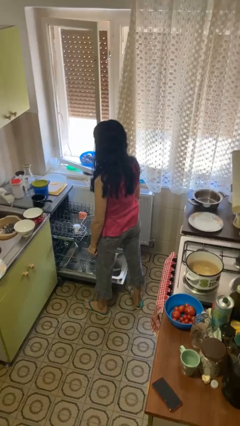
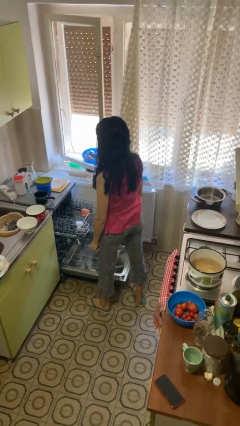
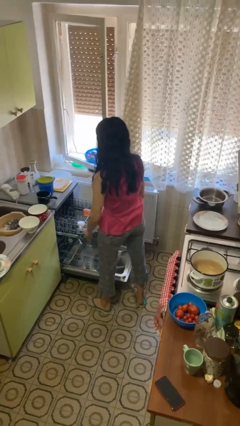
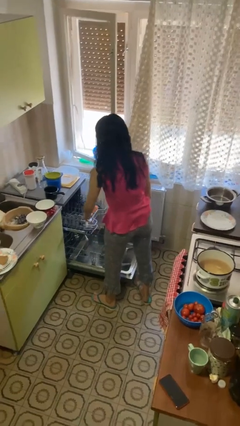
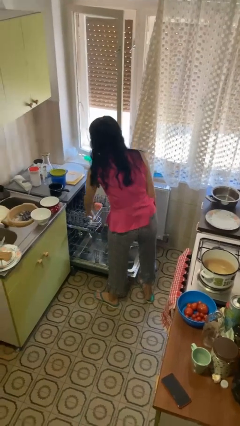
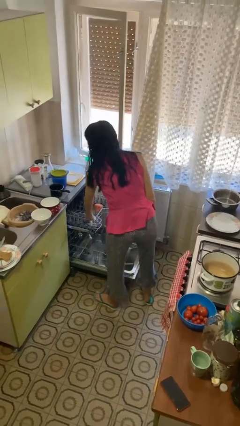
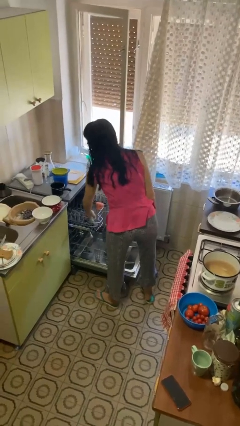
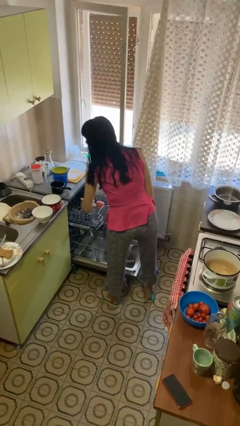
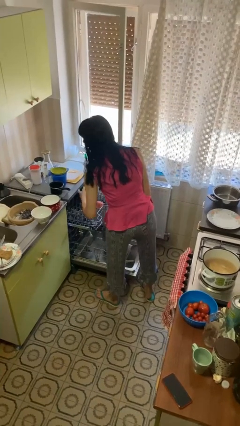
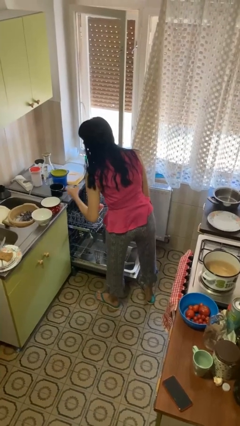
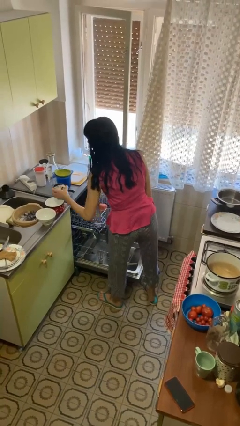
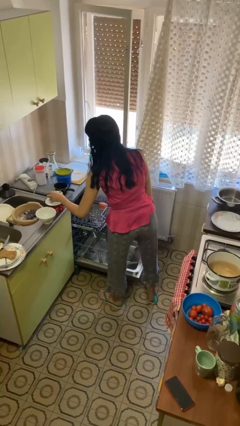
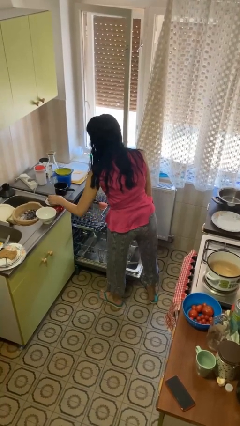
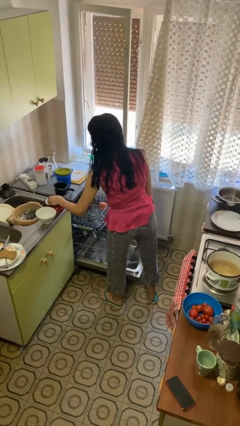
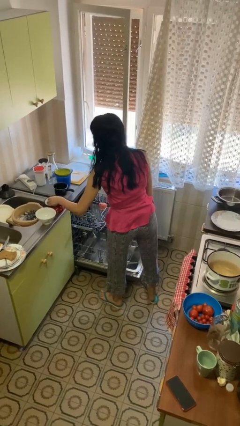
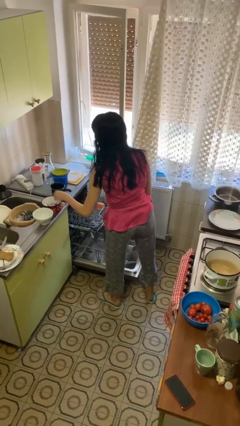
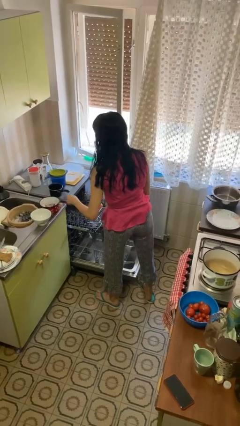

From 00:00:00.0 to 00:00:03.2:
person unloads dishwasher

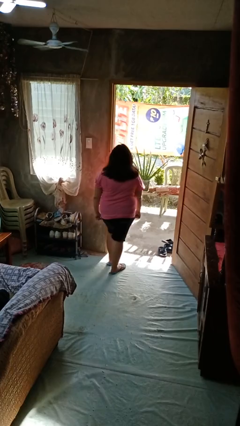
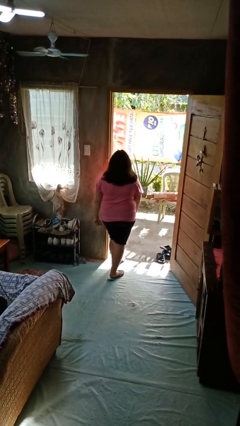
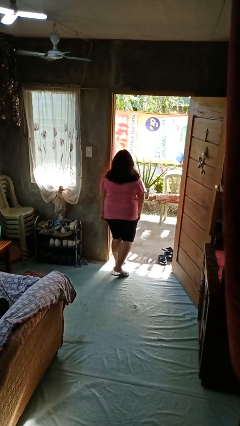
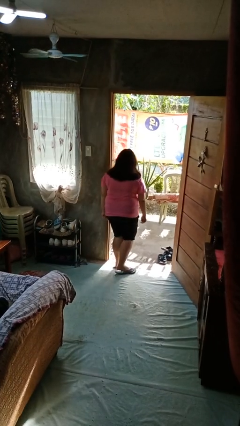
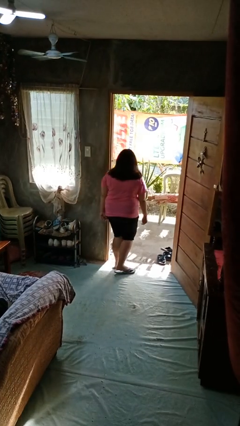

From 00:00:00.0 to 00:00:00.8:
person bumps into wall

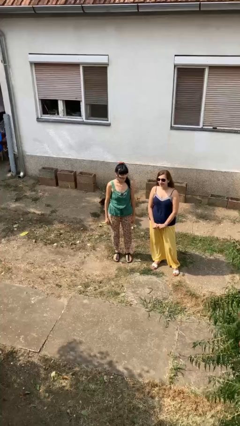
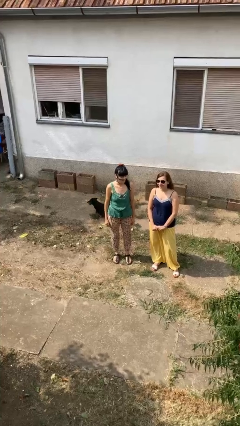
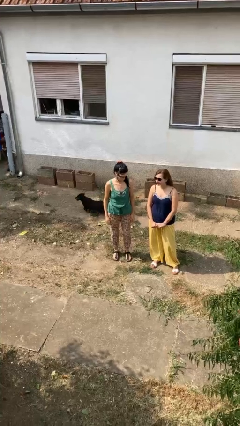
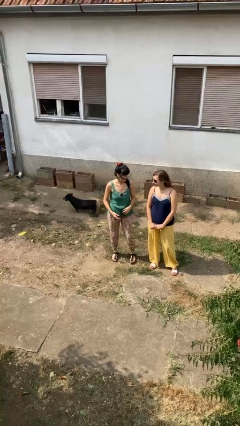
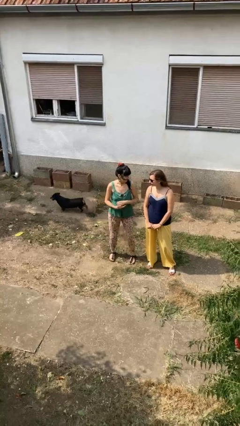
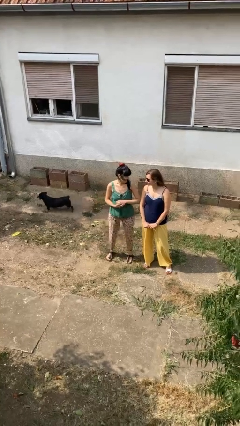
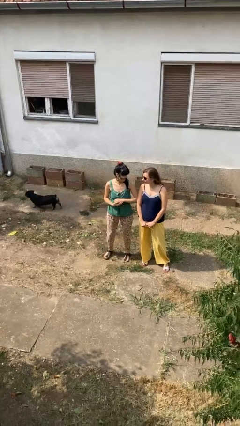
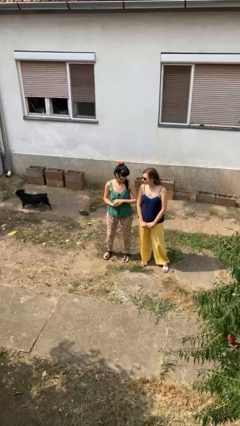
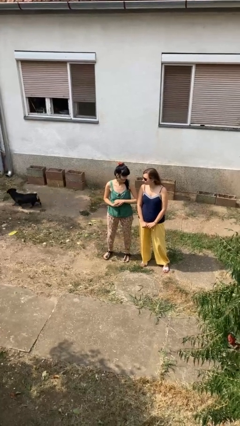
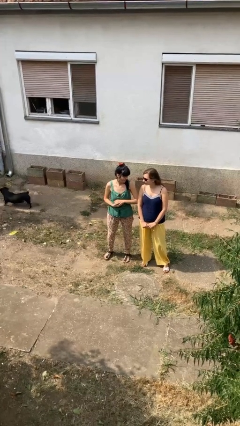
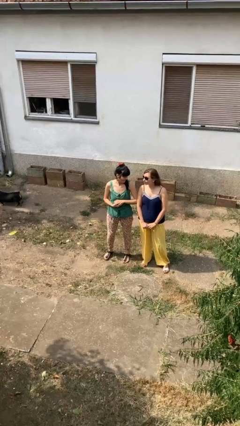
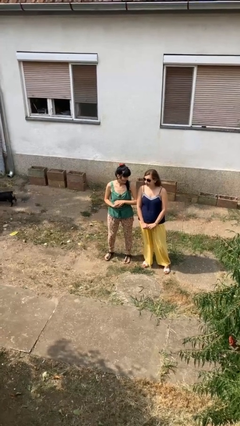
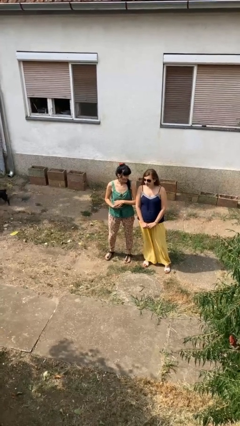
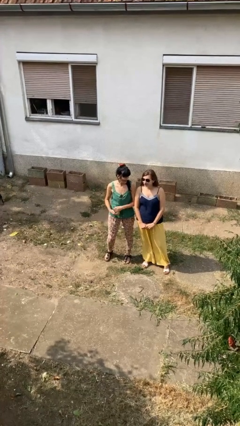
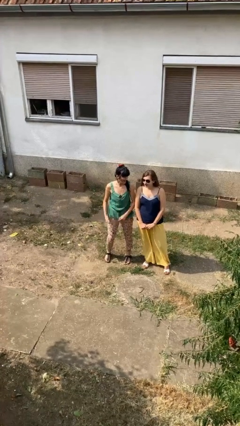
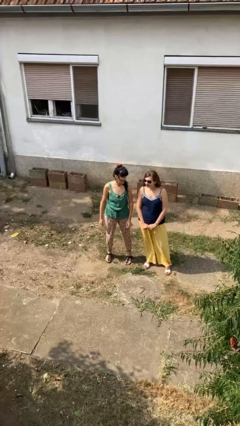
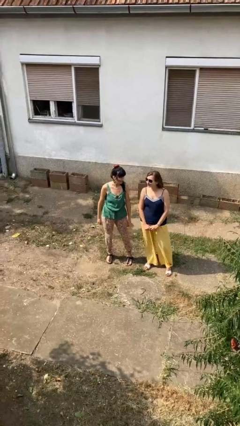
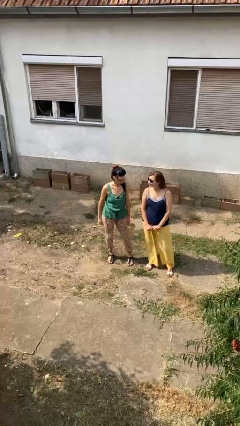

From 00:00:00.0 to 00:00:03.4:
person nudges person with elbow

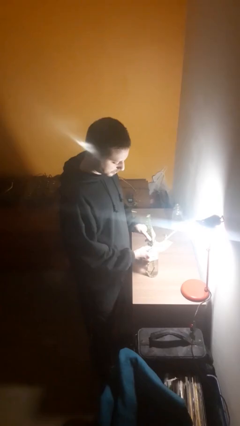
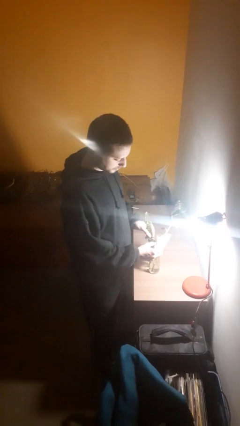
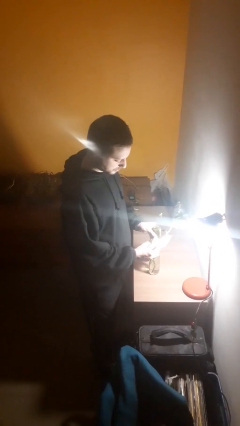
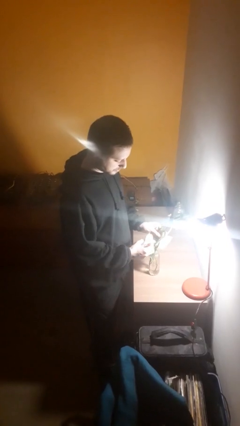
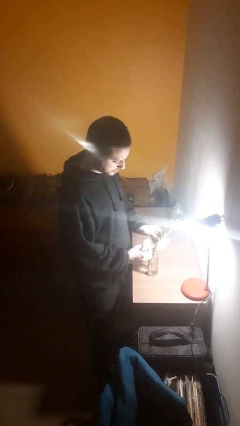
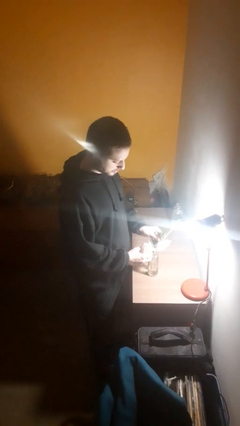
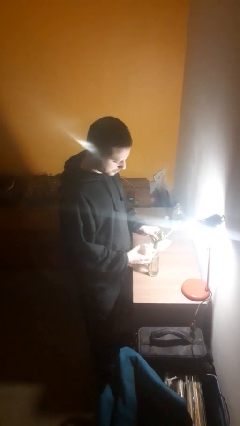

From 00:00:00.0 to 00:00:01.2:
person arranges flowers in vase

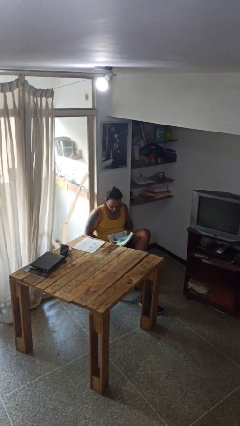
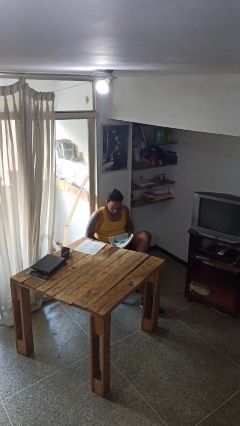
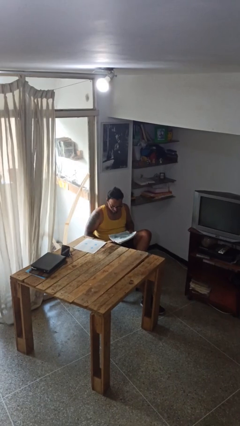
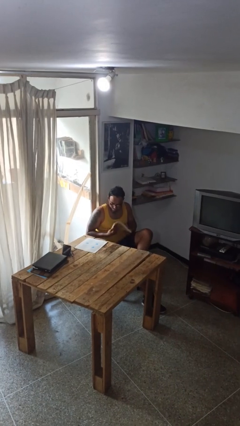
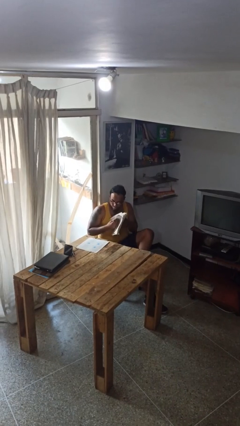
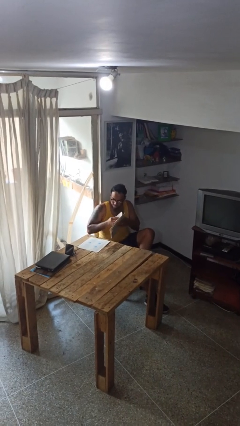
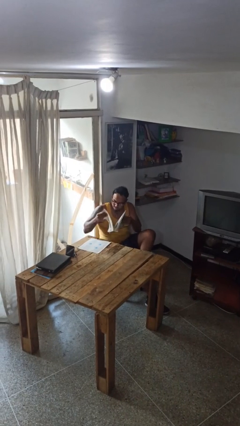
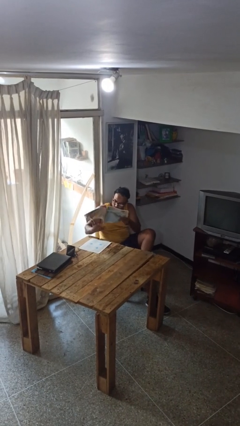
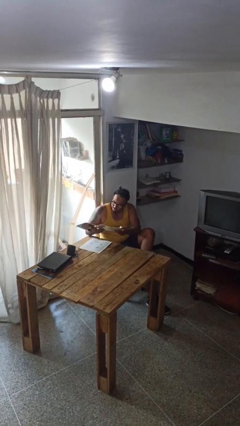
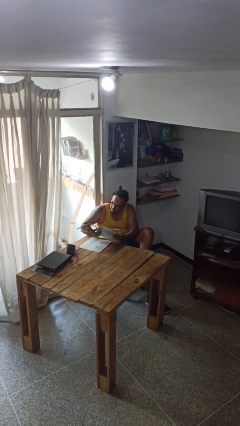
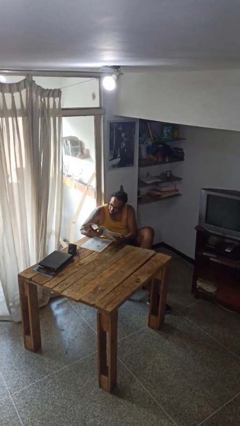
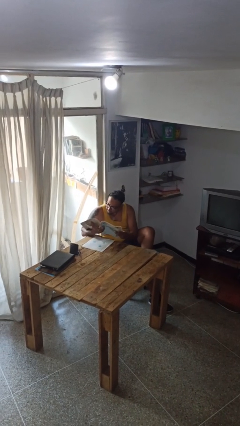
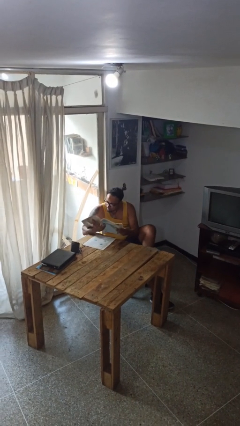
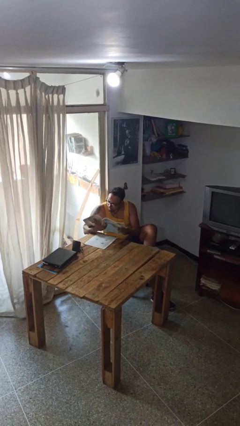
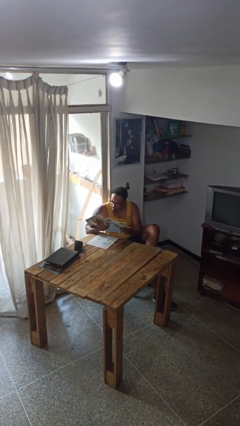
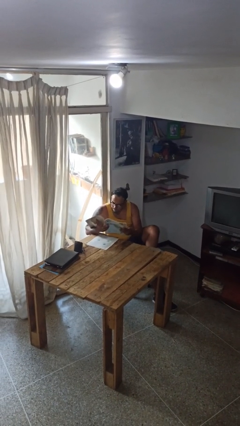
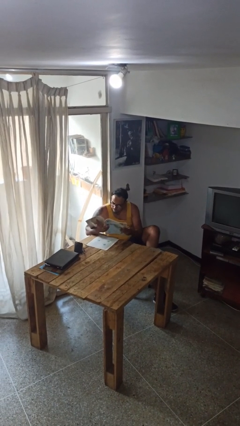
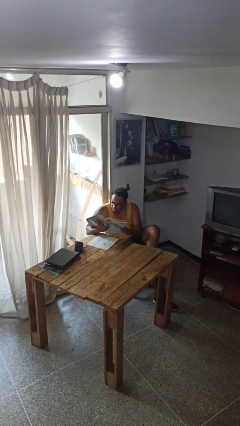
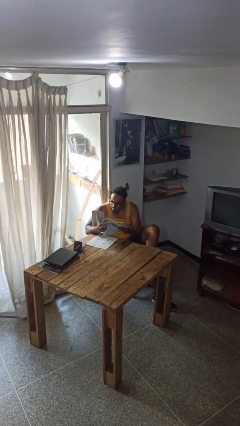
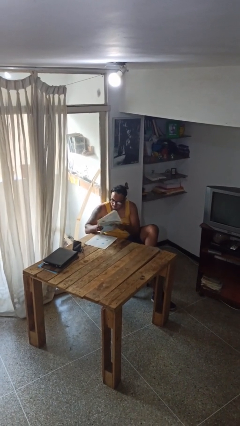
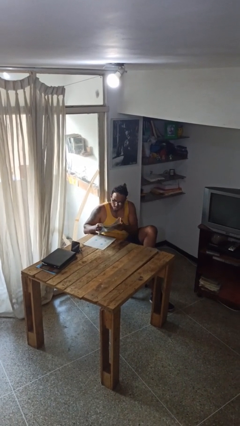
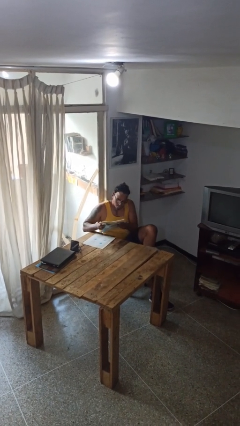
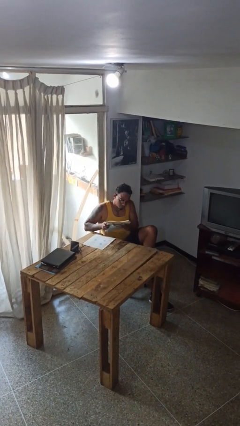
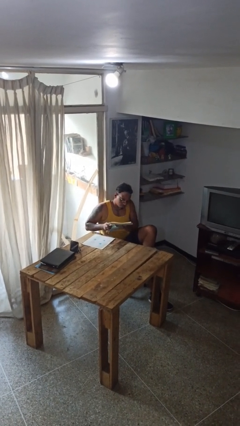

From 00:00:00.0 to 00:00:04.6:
person reads document

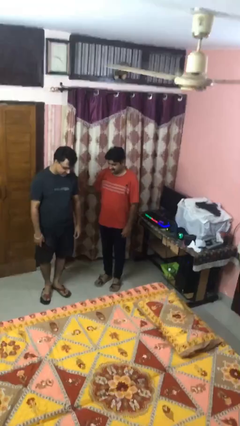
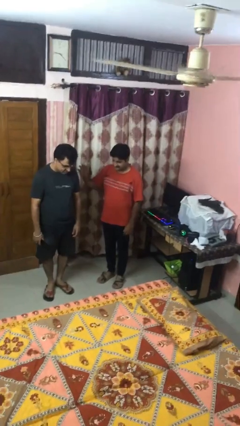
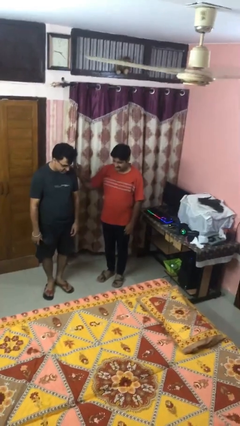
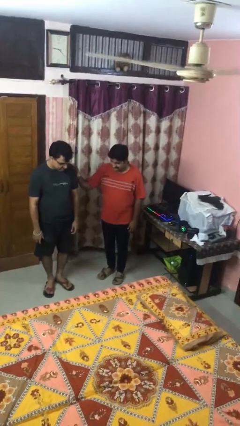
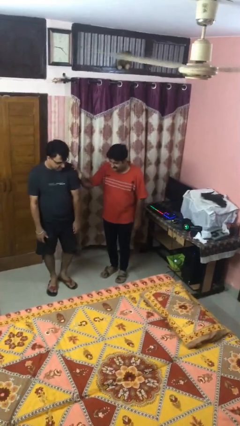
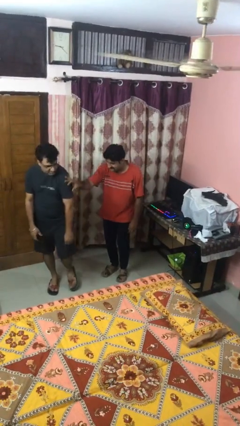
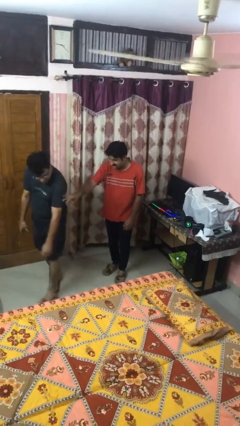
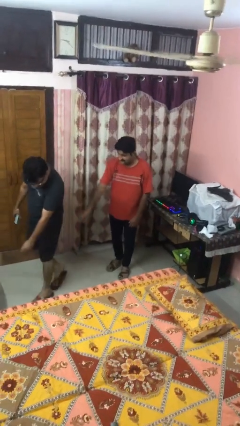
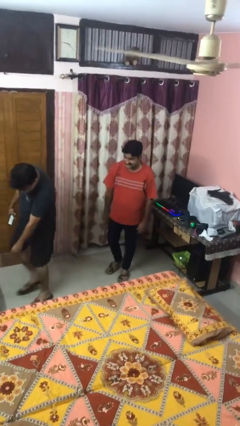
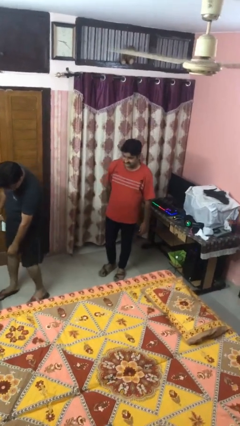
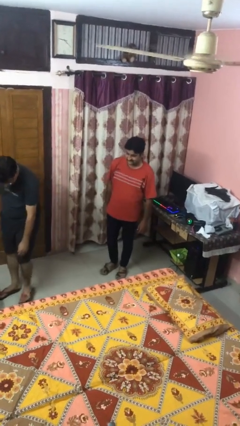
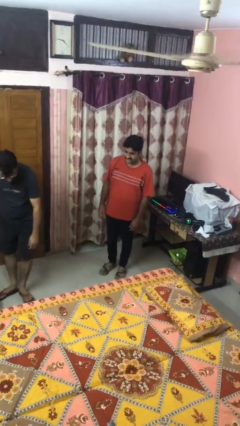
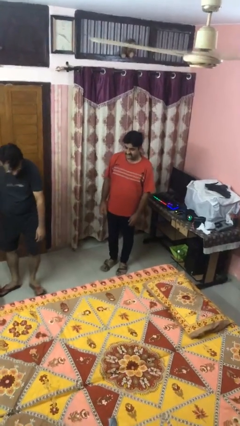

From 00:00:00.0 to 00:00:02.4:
person shoves person

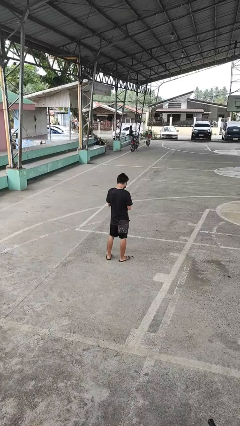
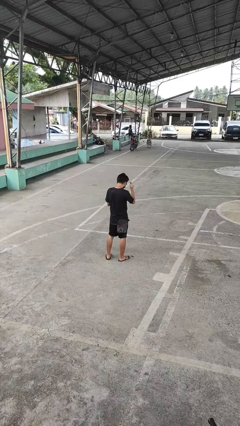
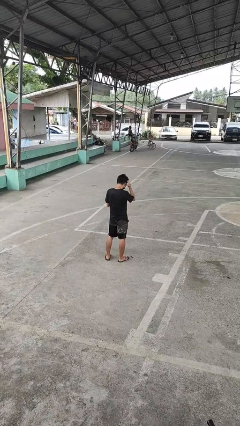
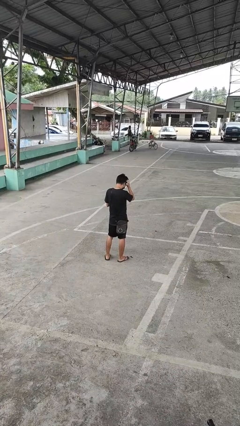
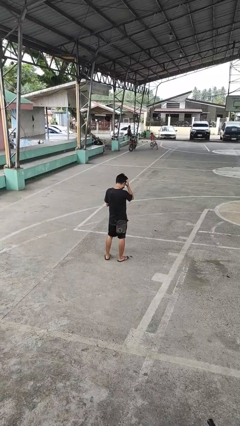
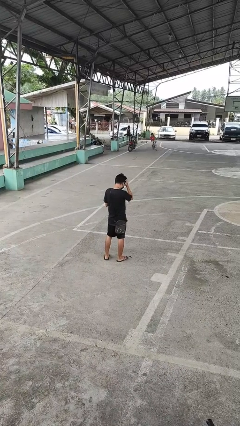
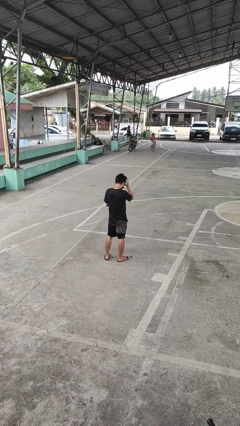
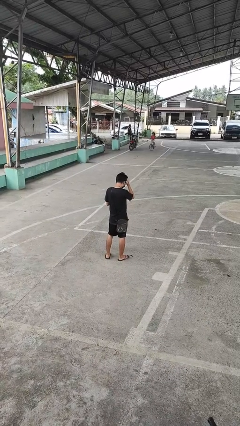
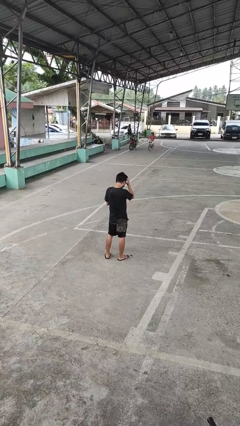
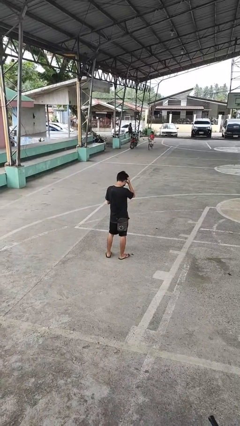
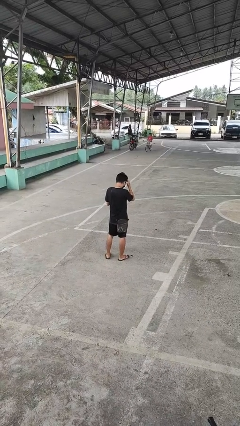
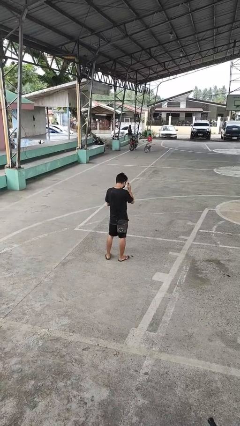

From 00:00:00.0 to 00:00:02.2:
person scratches face
